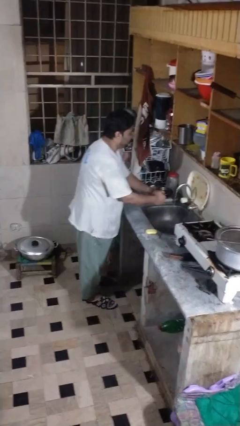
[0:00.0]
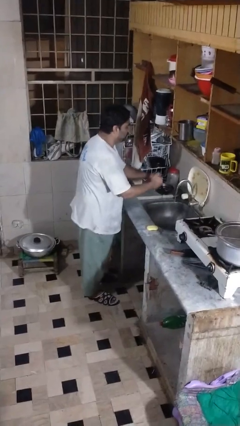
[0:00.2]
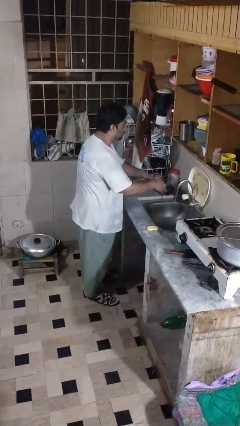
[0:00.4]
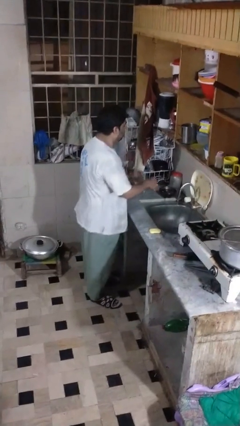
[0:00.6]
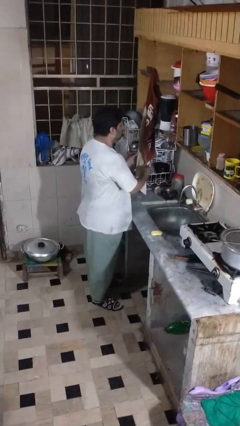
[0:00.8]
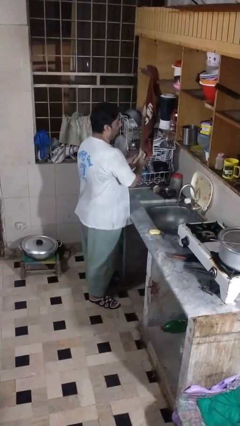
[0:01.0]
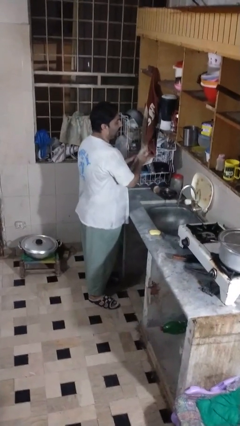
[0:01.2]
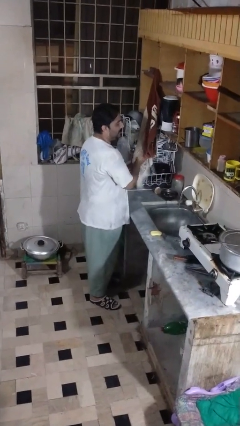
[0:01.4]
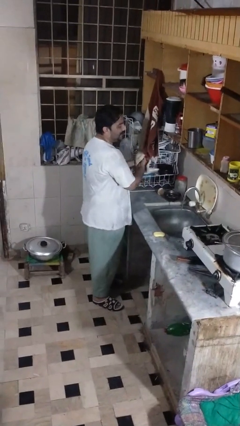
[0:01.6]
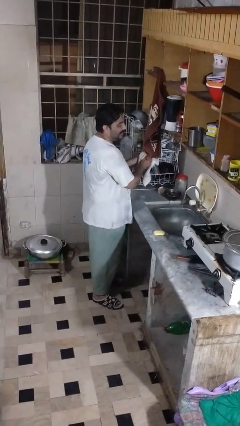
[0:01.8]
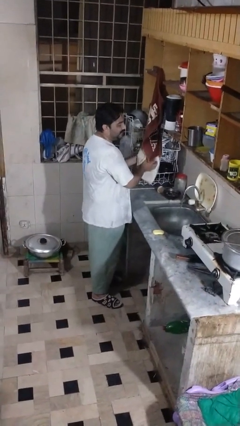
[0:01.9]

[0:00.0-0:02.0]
person dries hands with towel

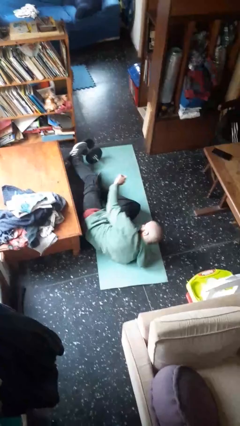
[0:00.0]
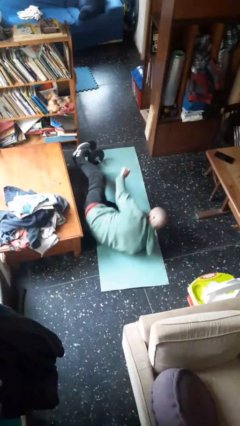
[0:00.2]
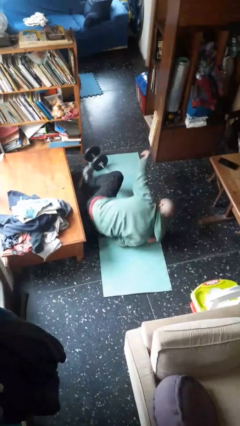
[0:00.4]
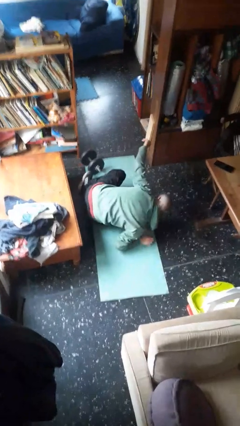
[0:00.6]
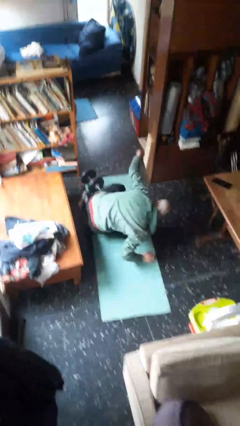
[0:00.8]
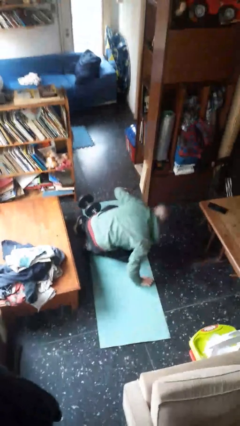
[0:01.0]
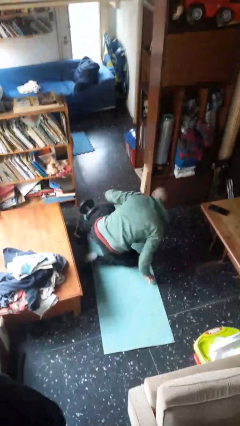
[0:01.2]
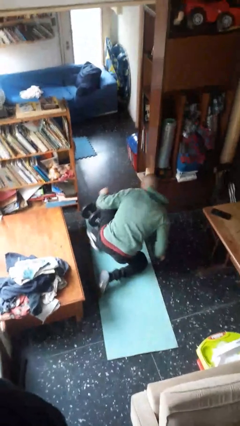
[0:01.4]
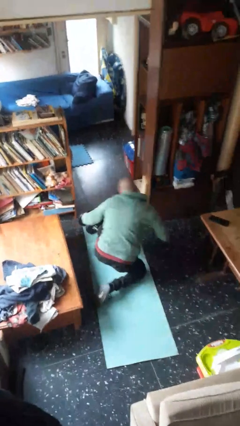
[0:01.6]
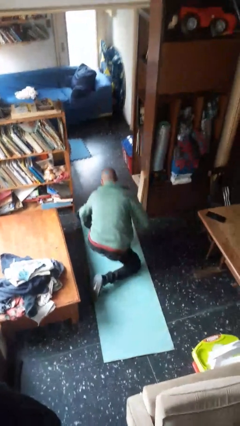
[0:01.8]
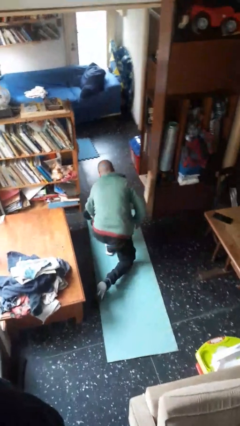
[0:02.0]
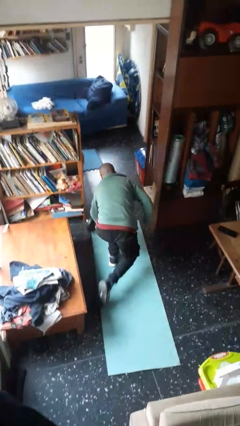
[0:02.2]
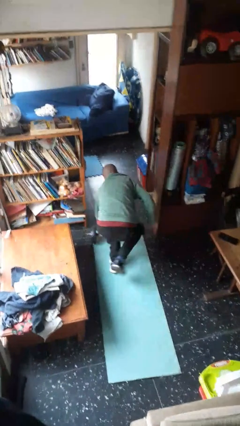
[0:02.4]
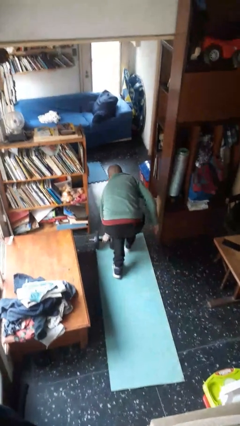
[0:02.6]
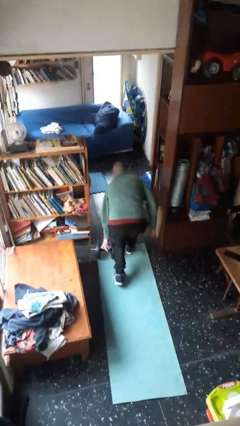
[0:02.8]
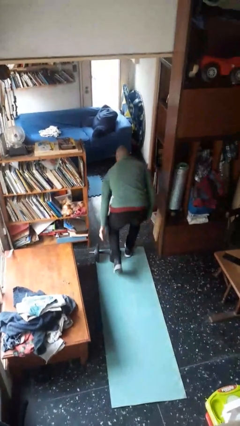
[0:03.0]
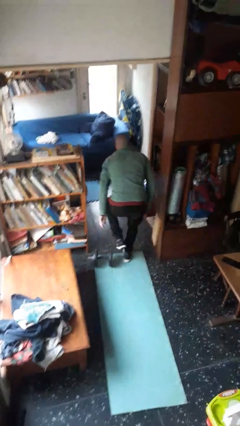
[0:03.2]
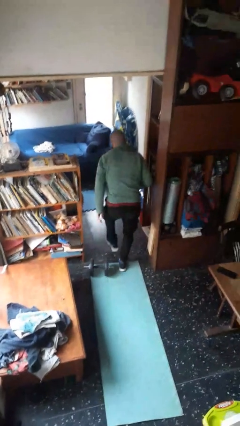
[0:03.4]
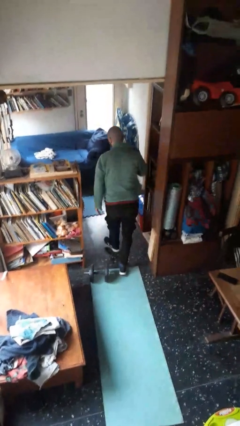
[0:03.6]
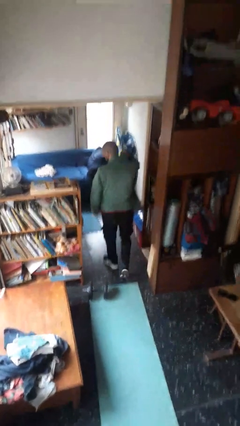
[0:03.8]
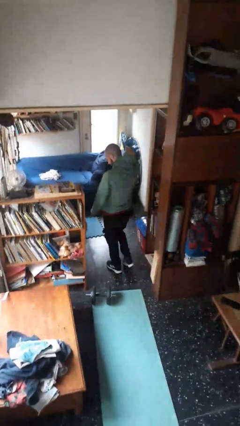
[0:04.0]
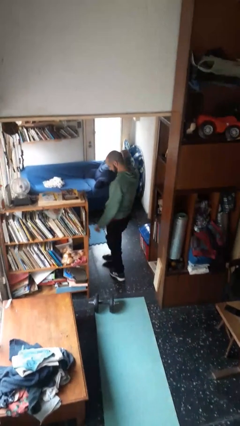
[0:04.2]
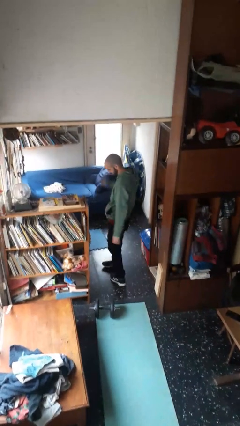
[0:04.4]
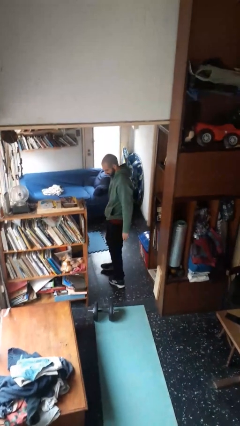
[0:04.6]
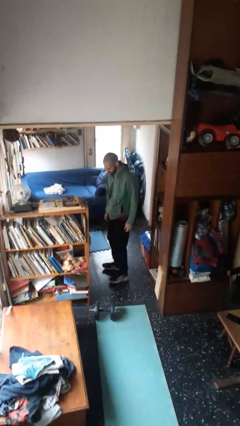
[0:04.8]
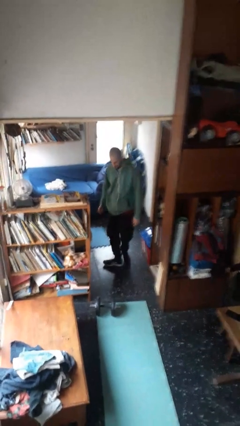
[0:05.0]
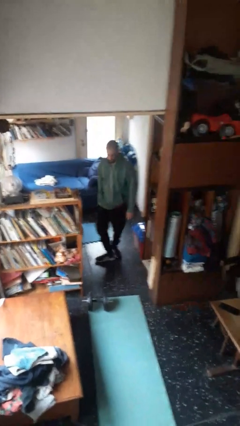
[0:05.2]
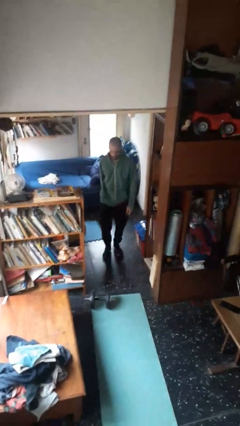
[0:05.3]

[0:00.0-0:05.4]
person stands up from floor

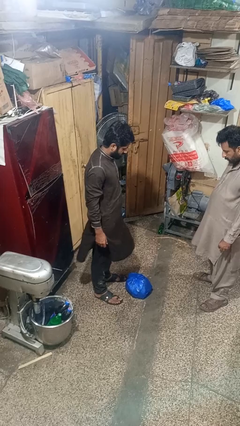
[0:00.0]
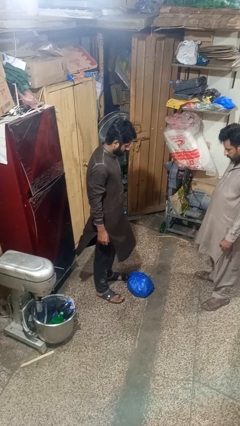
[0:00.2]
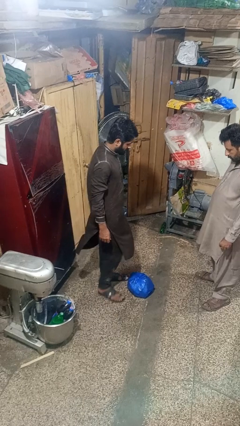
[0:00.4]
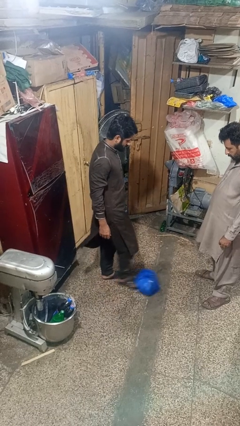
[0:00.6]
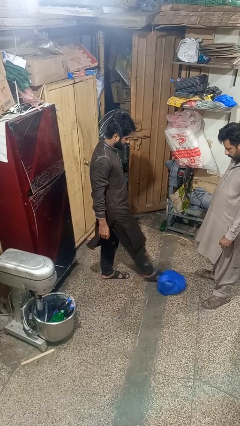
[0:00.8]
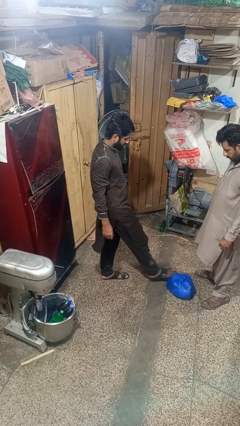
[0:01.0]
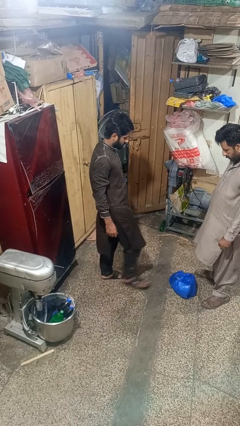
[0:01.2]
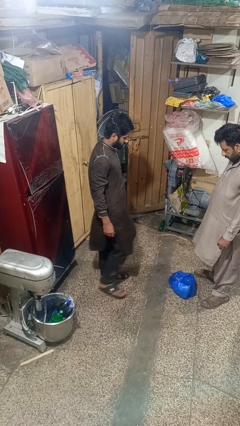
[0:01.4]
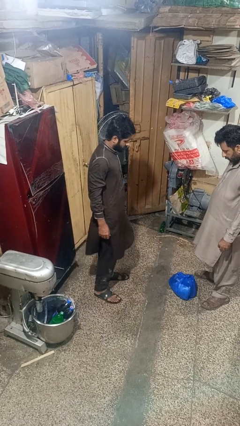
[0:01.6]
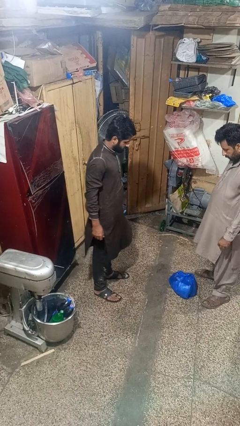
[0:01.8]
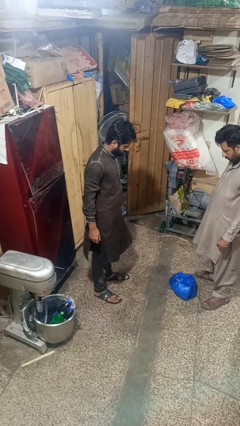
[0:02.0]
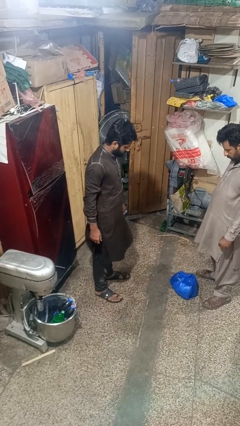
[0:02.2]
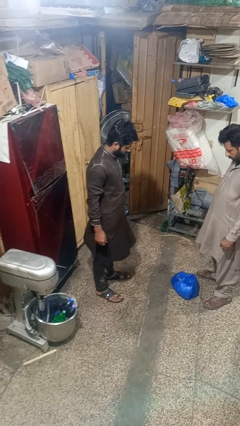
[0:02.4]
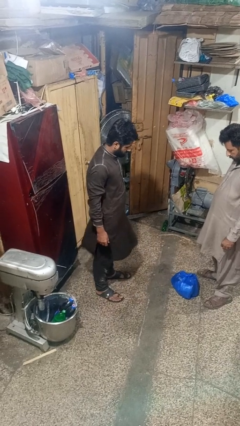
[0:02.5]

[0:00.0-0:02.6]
person kicks object to person

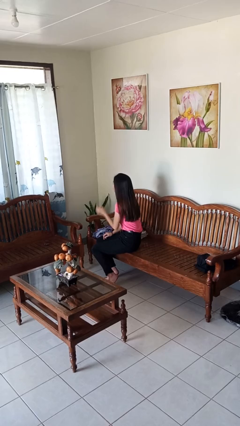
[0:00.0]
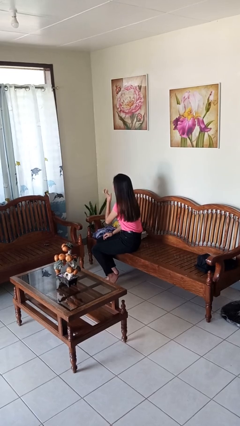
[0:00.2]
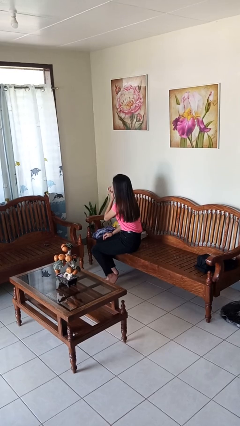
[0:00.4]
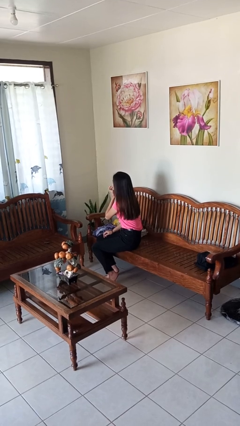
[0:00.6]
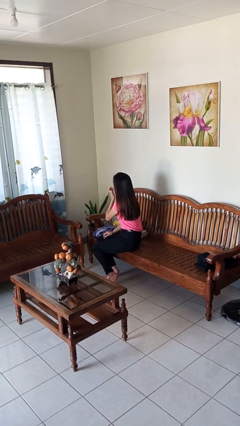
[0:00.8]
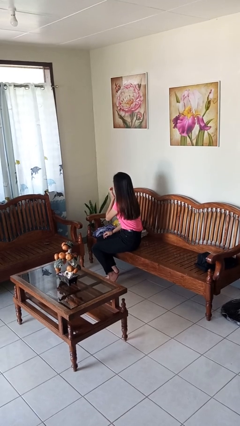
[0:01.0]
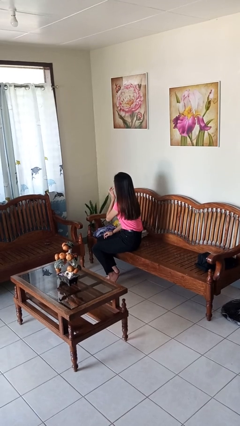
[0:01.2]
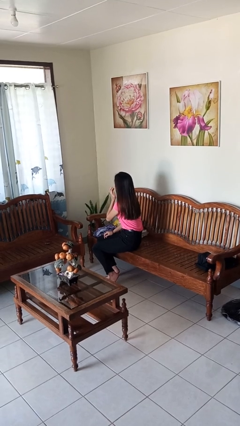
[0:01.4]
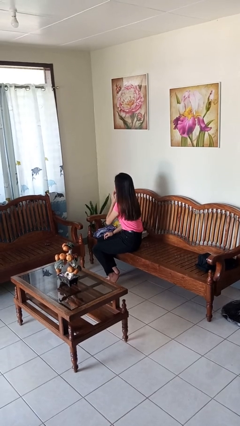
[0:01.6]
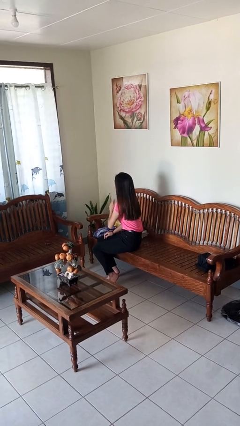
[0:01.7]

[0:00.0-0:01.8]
person licks fingers

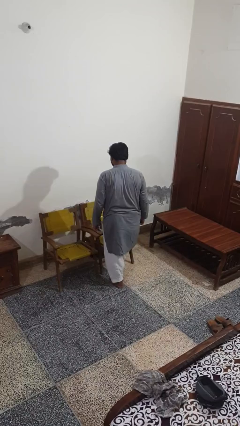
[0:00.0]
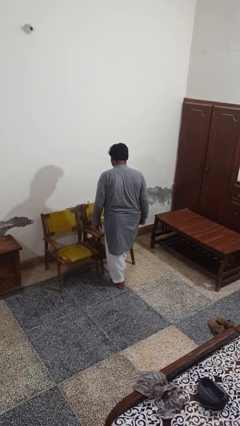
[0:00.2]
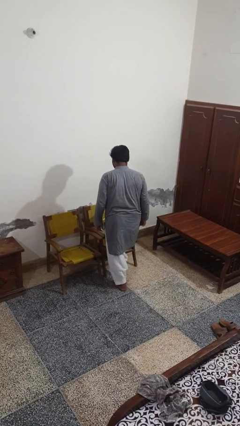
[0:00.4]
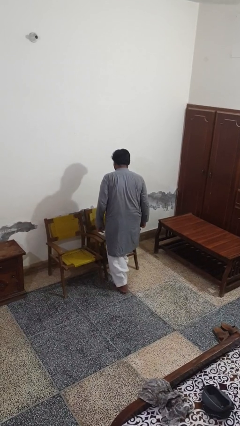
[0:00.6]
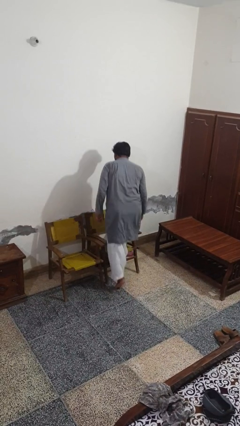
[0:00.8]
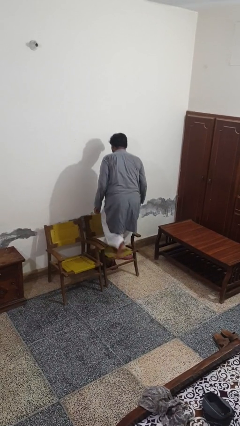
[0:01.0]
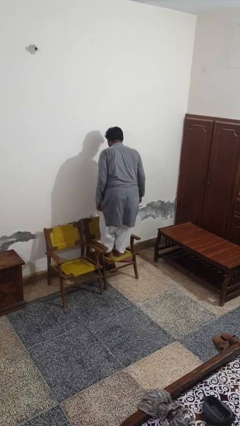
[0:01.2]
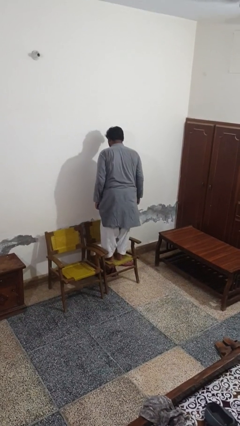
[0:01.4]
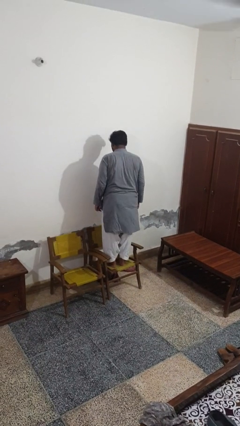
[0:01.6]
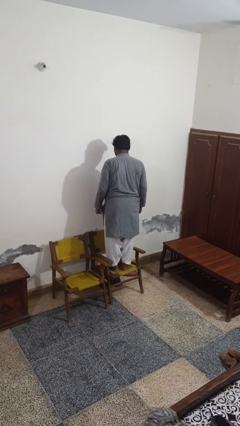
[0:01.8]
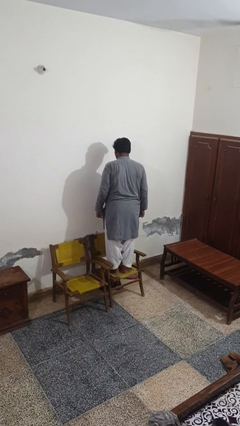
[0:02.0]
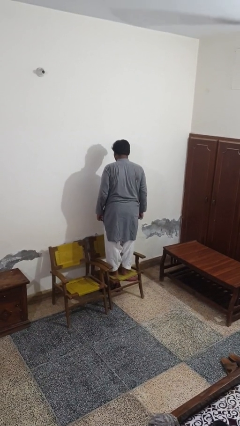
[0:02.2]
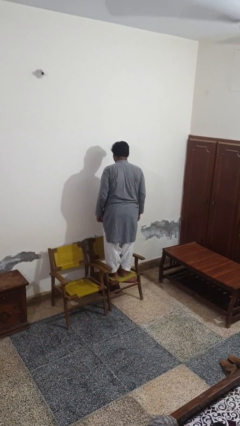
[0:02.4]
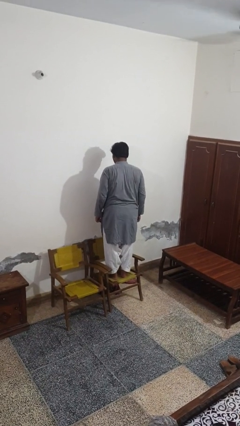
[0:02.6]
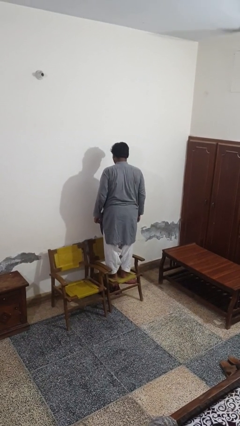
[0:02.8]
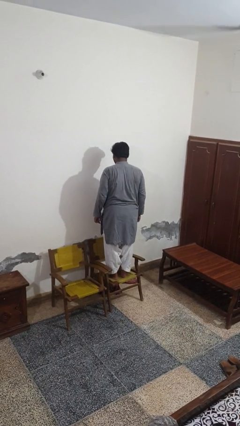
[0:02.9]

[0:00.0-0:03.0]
person climbs on chair

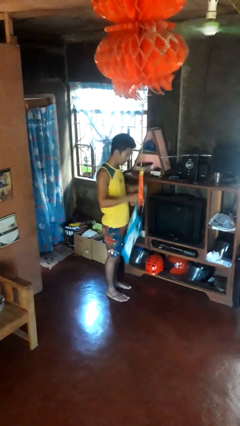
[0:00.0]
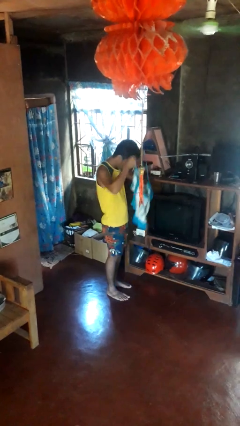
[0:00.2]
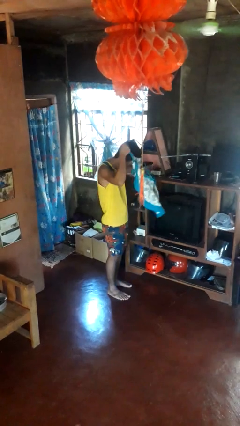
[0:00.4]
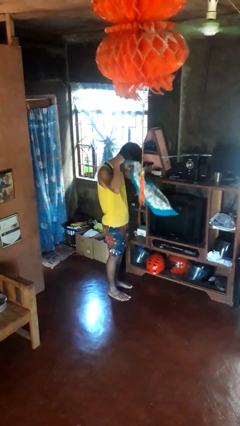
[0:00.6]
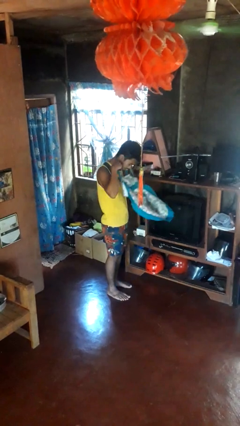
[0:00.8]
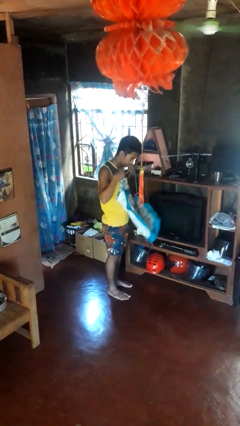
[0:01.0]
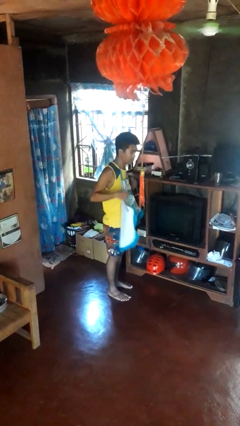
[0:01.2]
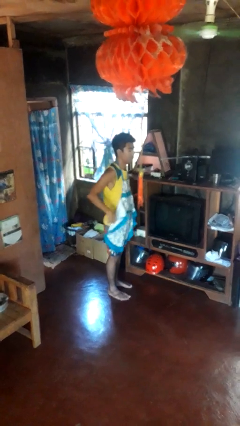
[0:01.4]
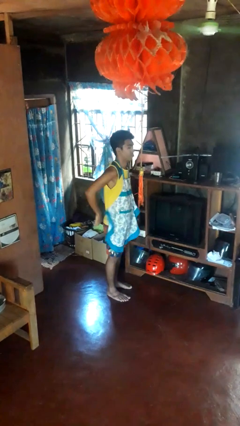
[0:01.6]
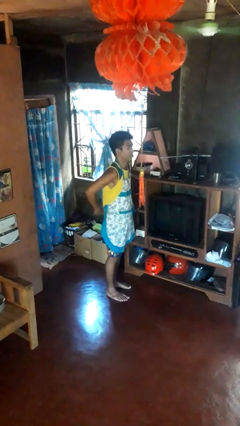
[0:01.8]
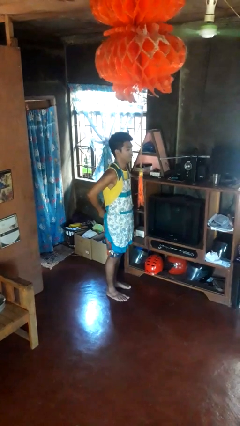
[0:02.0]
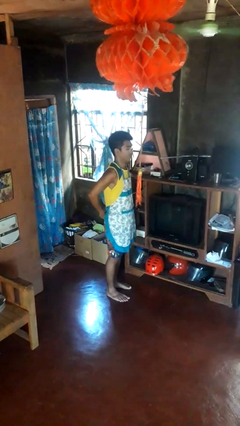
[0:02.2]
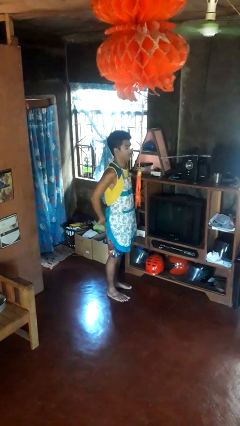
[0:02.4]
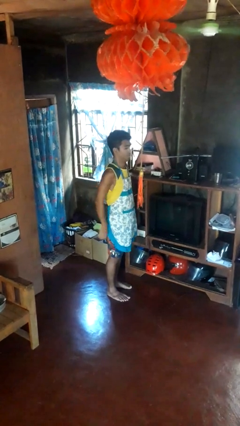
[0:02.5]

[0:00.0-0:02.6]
person puts on apron

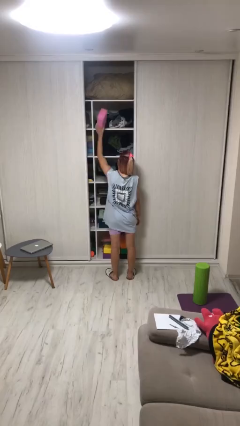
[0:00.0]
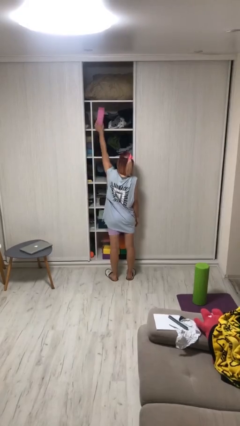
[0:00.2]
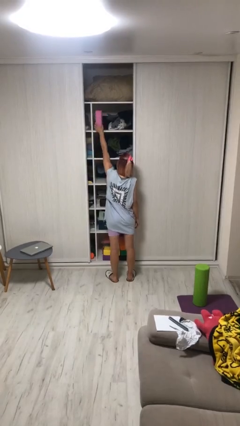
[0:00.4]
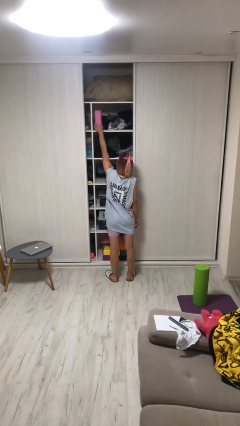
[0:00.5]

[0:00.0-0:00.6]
person puts down object on shelf
